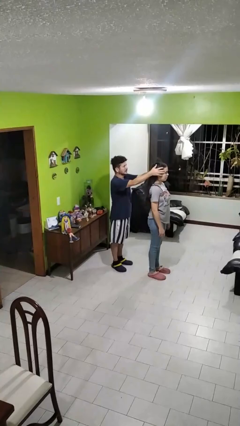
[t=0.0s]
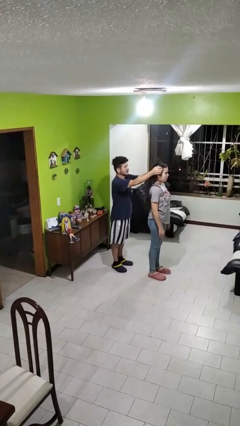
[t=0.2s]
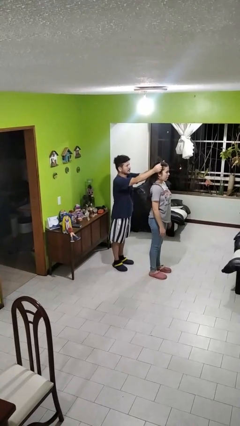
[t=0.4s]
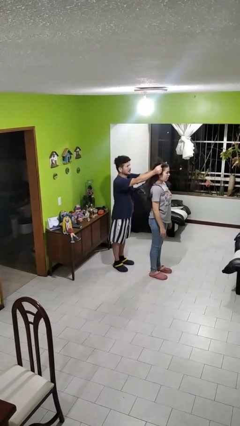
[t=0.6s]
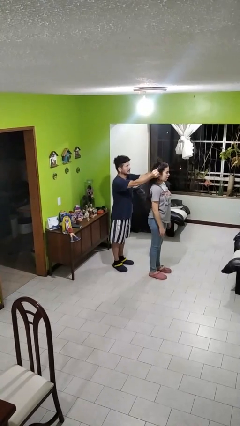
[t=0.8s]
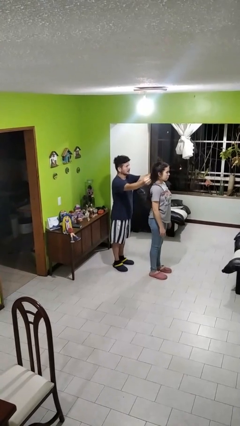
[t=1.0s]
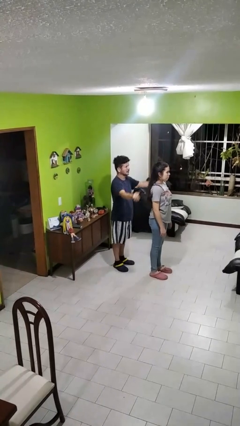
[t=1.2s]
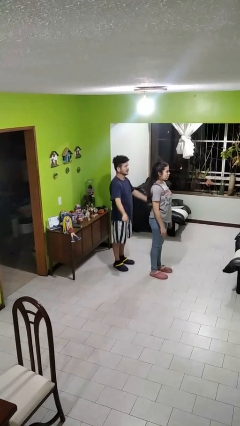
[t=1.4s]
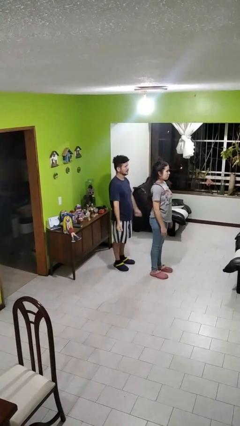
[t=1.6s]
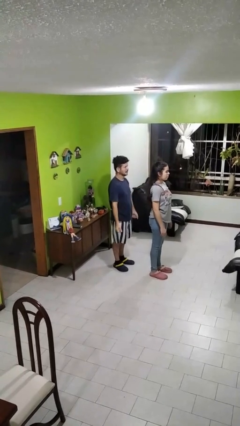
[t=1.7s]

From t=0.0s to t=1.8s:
person grabs person by hair

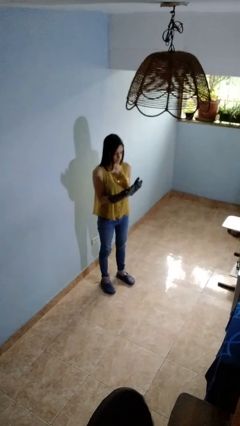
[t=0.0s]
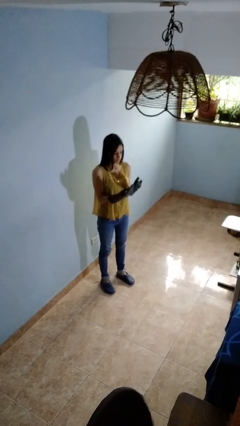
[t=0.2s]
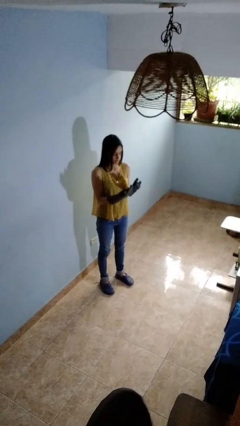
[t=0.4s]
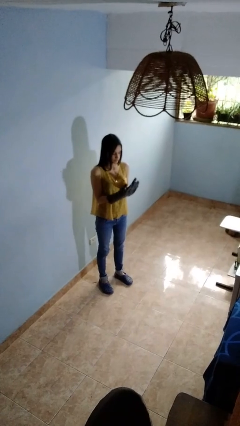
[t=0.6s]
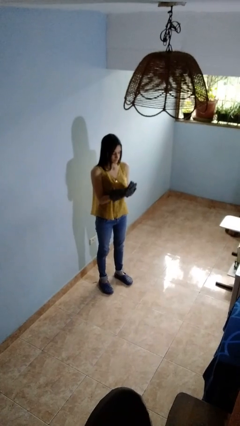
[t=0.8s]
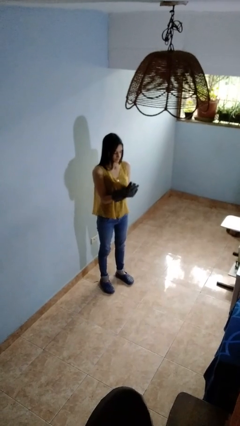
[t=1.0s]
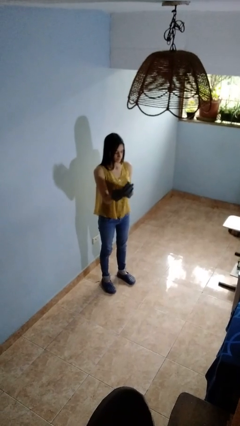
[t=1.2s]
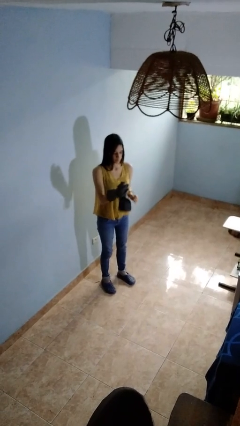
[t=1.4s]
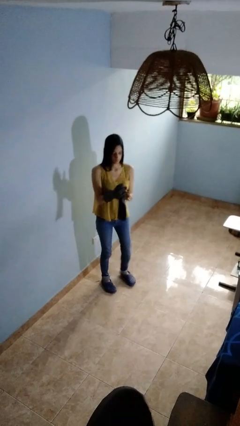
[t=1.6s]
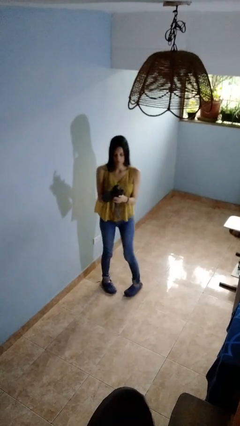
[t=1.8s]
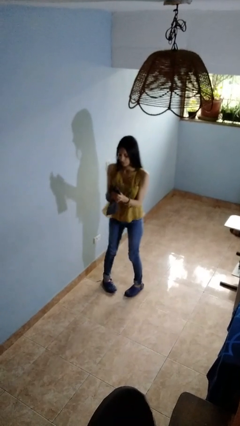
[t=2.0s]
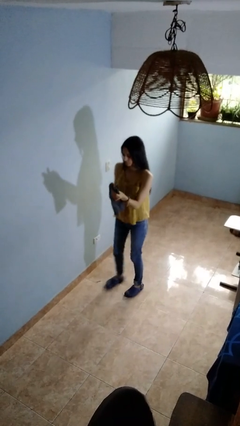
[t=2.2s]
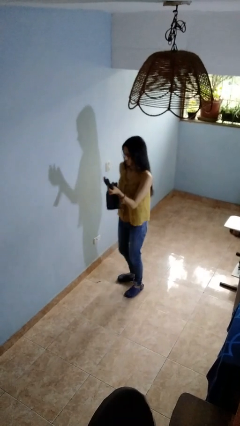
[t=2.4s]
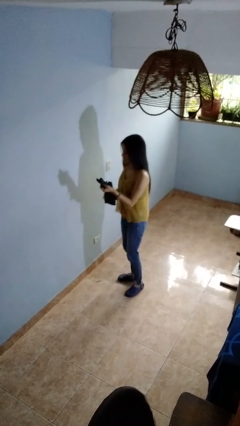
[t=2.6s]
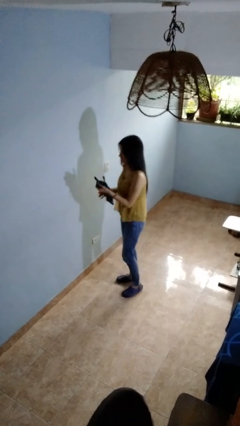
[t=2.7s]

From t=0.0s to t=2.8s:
person takes off gloves

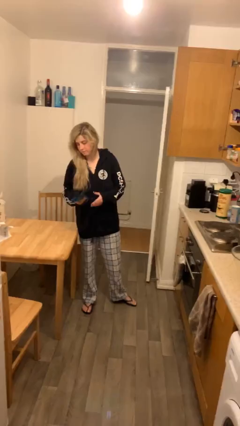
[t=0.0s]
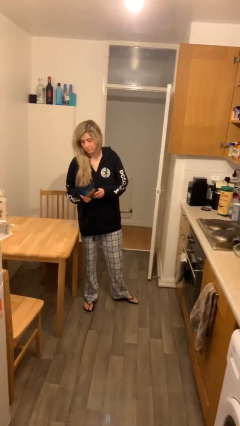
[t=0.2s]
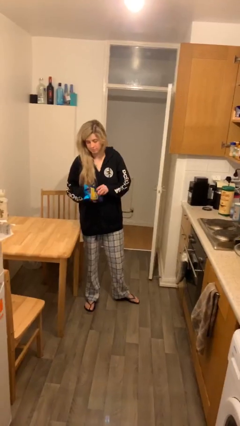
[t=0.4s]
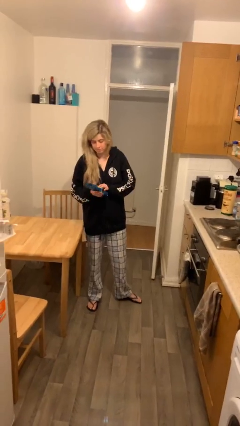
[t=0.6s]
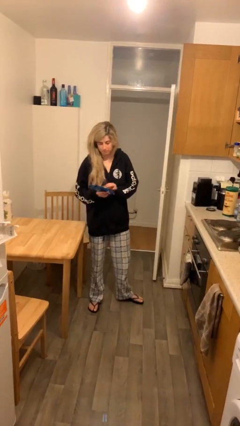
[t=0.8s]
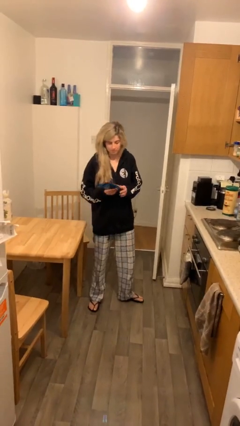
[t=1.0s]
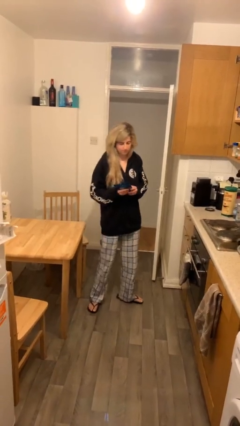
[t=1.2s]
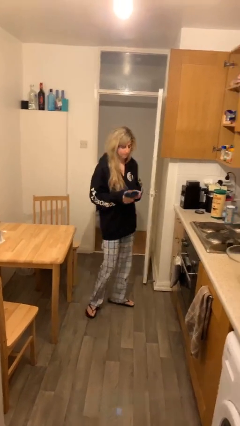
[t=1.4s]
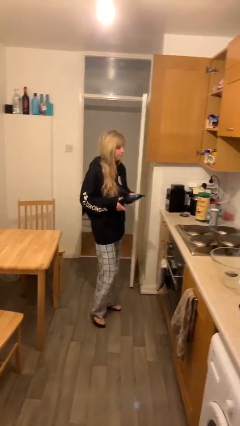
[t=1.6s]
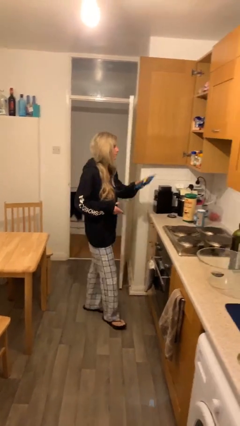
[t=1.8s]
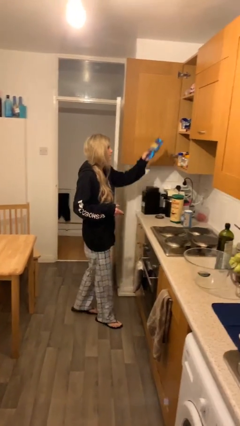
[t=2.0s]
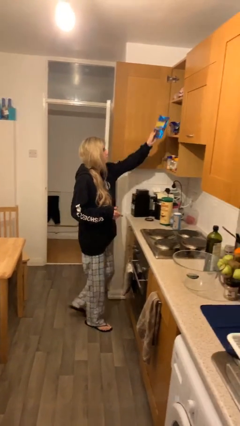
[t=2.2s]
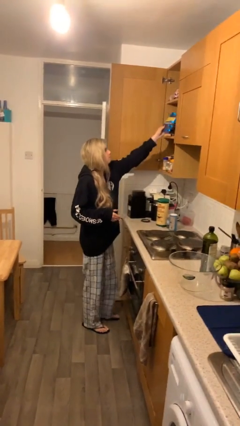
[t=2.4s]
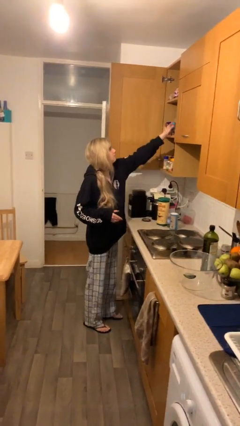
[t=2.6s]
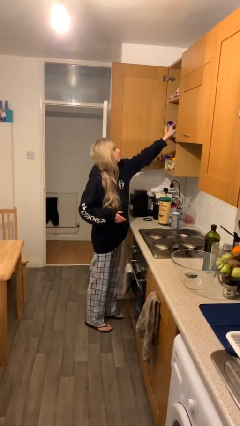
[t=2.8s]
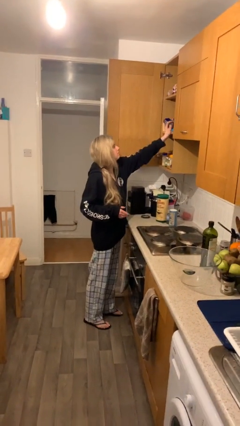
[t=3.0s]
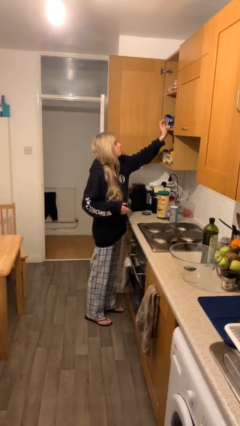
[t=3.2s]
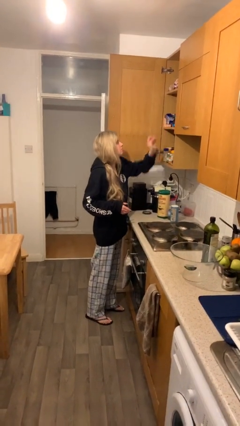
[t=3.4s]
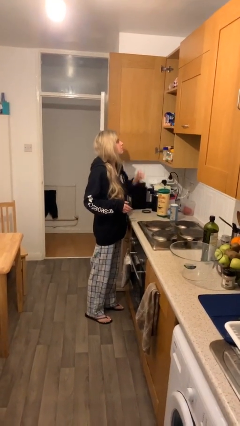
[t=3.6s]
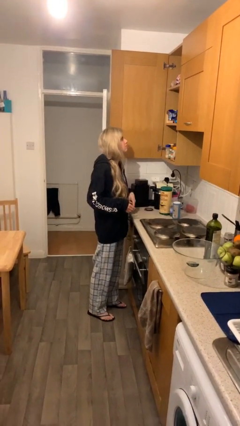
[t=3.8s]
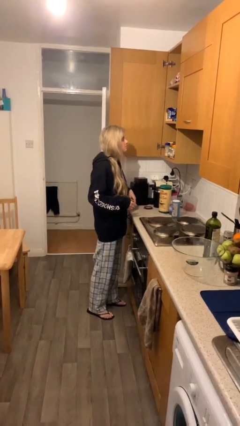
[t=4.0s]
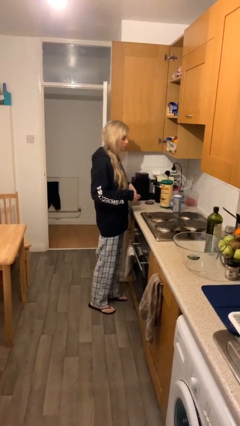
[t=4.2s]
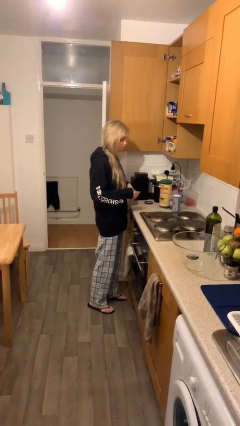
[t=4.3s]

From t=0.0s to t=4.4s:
person puts down object on shelf

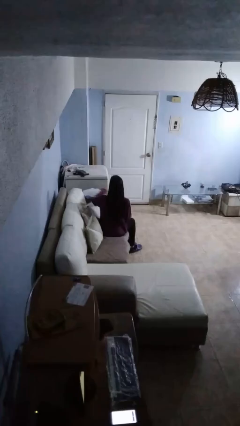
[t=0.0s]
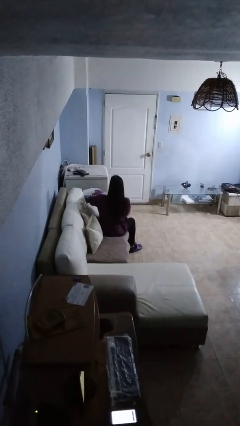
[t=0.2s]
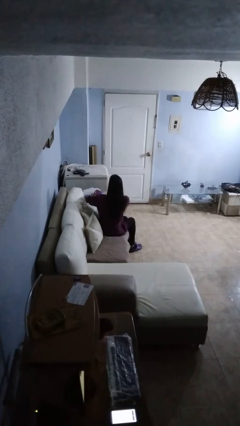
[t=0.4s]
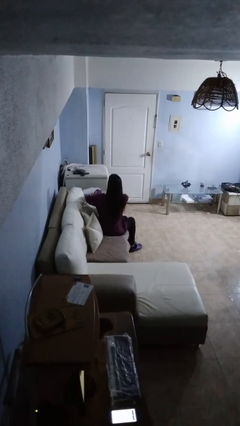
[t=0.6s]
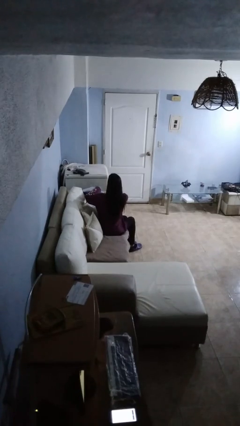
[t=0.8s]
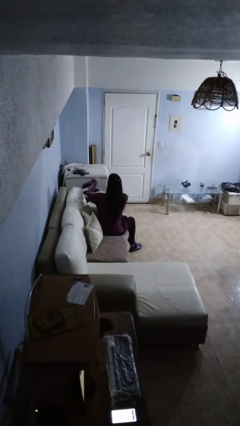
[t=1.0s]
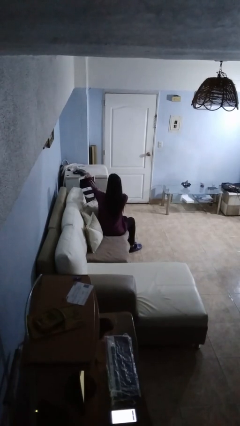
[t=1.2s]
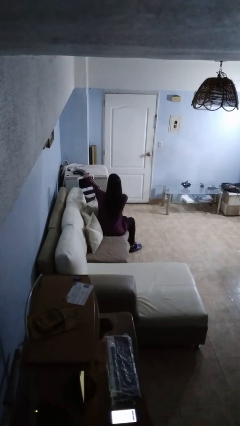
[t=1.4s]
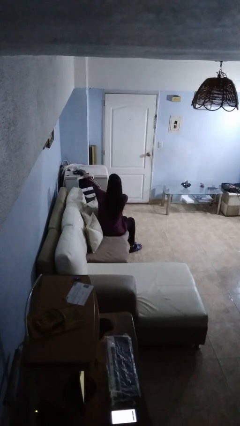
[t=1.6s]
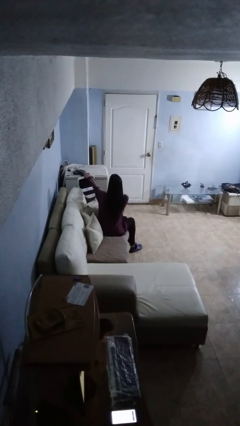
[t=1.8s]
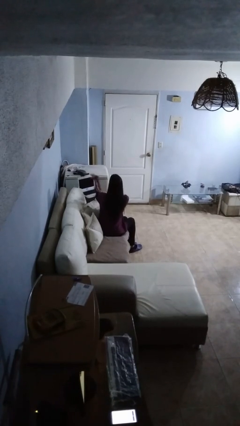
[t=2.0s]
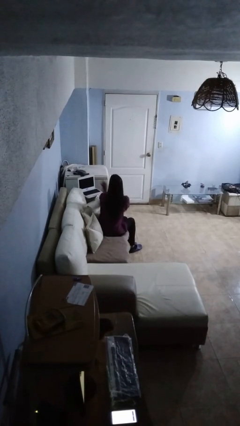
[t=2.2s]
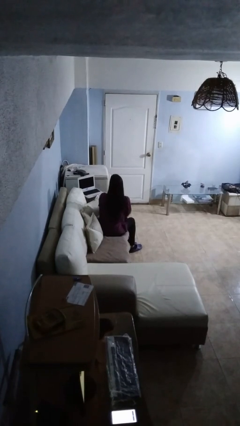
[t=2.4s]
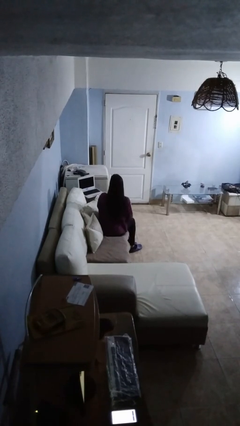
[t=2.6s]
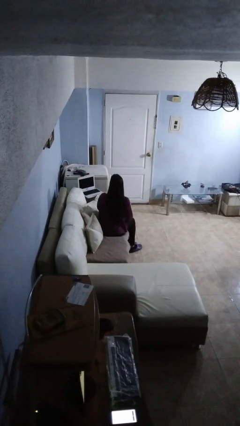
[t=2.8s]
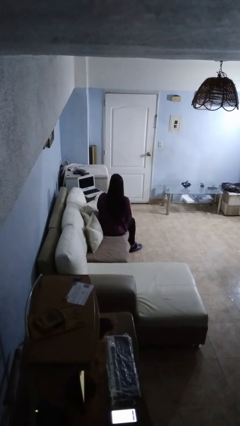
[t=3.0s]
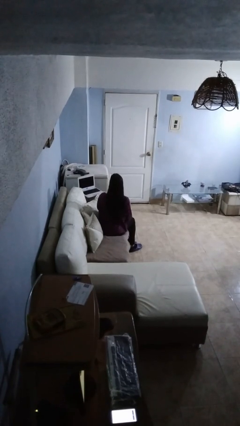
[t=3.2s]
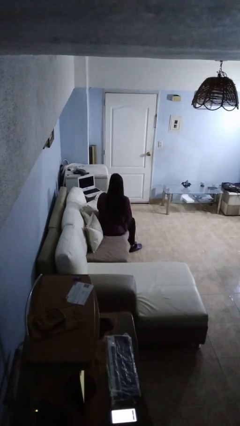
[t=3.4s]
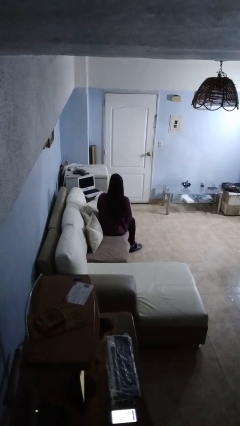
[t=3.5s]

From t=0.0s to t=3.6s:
person opens laptop

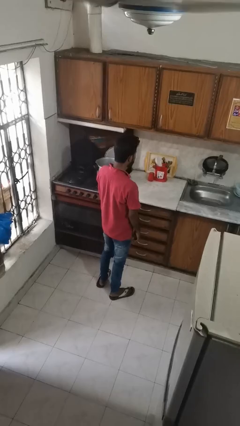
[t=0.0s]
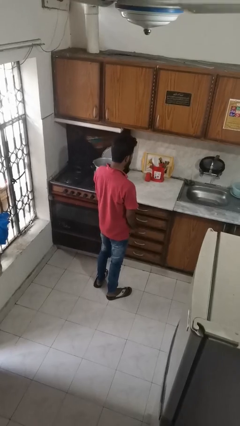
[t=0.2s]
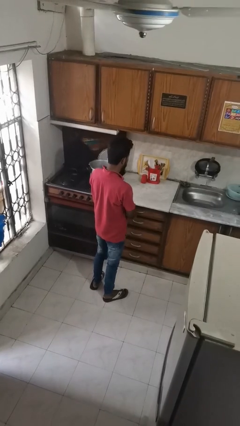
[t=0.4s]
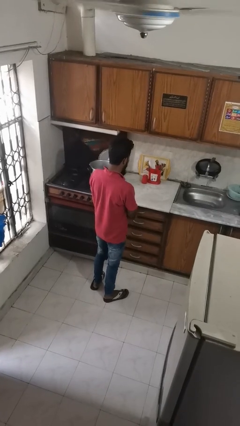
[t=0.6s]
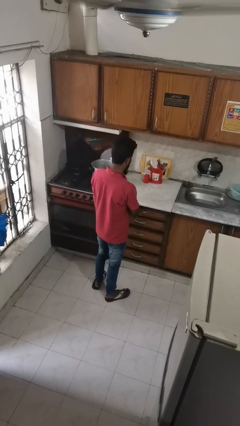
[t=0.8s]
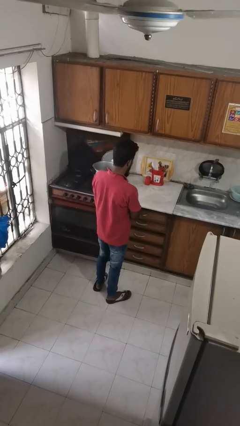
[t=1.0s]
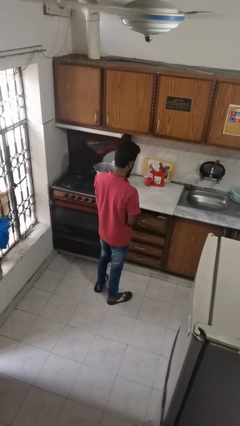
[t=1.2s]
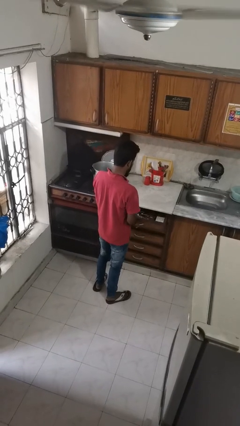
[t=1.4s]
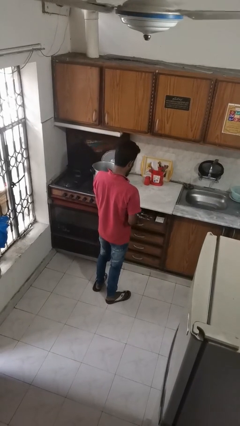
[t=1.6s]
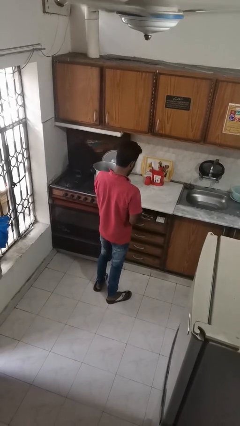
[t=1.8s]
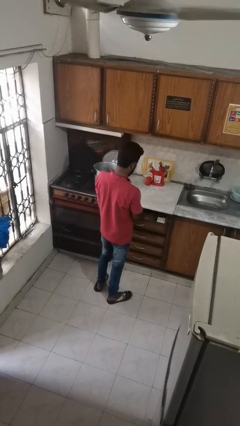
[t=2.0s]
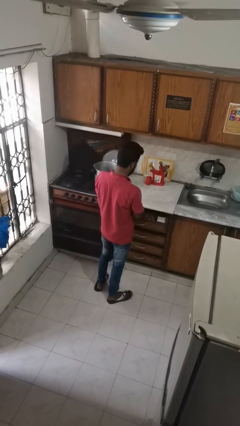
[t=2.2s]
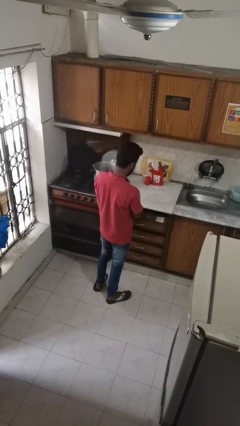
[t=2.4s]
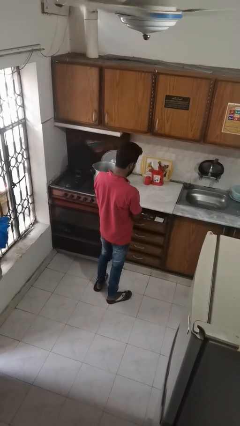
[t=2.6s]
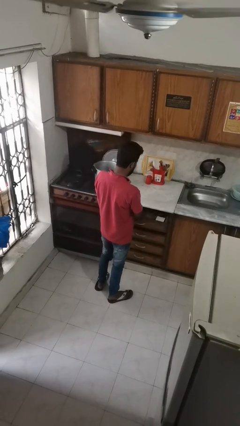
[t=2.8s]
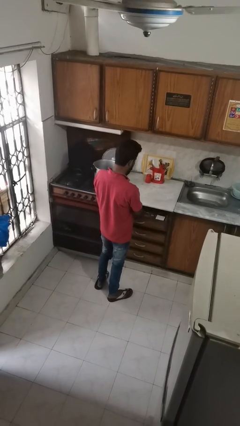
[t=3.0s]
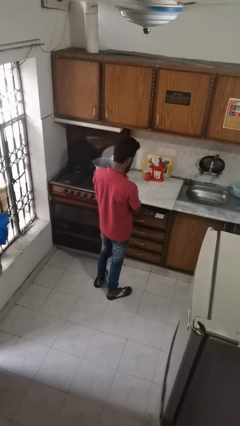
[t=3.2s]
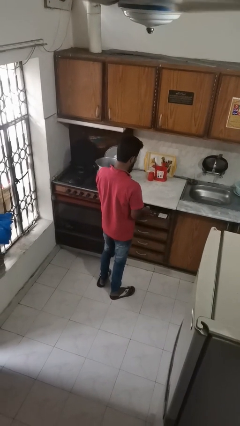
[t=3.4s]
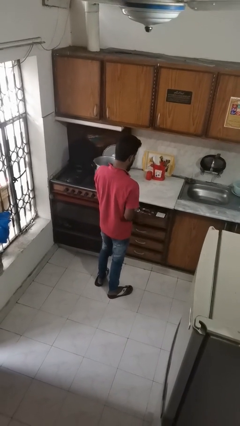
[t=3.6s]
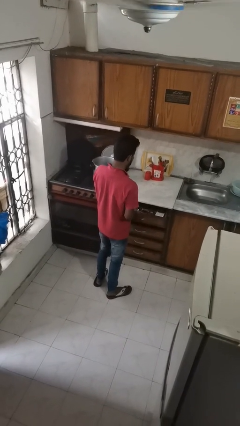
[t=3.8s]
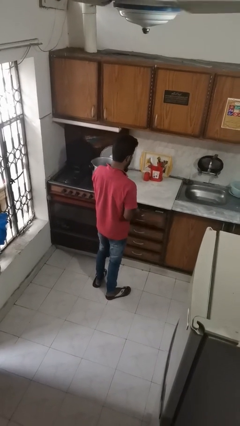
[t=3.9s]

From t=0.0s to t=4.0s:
person searches in kitchen drawer

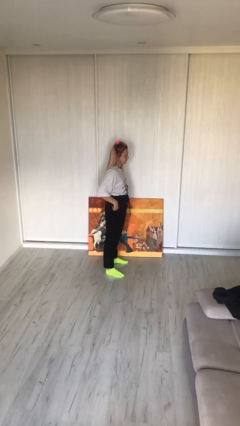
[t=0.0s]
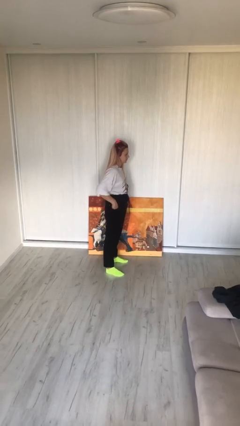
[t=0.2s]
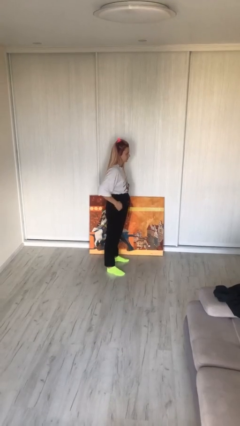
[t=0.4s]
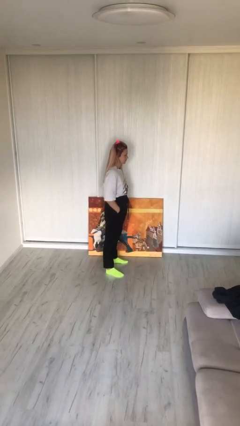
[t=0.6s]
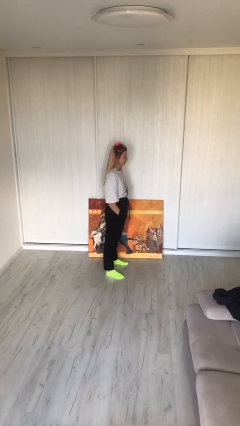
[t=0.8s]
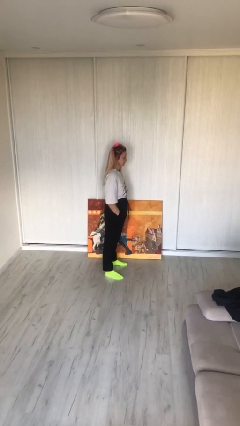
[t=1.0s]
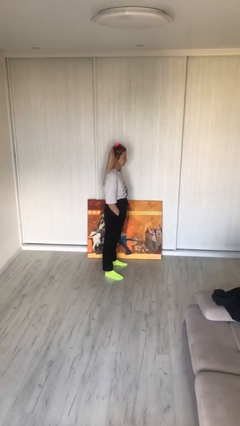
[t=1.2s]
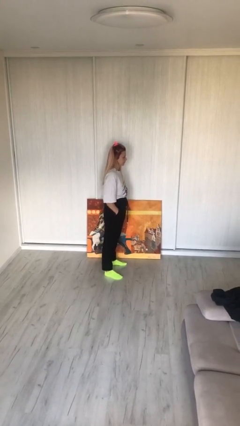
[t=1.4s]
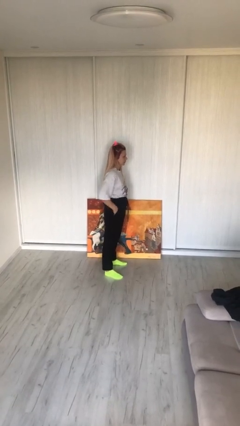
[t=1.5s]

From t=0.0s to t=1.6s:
person puts hands in back pockets
